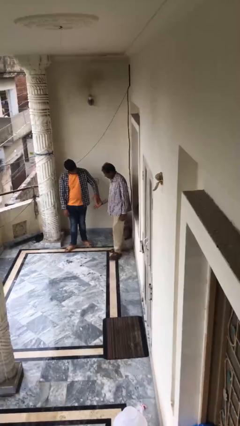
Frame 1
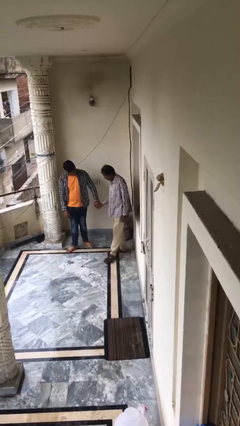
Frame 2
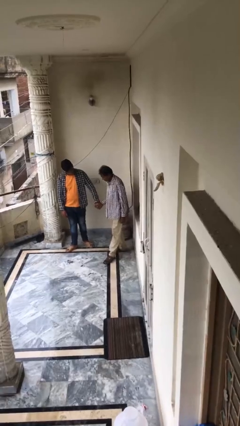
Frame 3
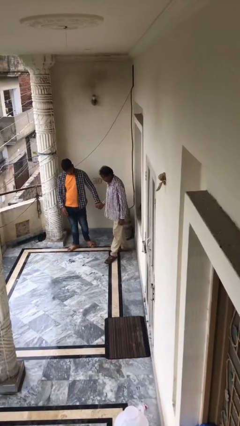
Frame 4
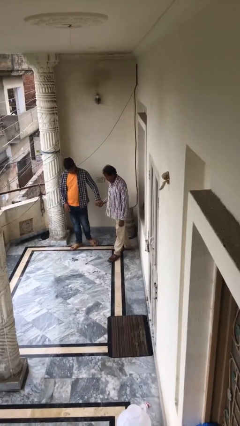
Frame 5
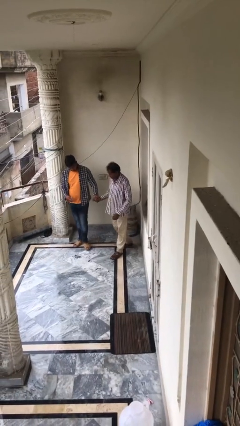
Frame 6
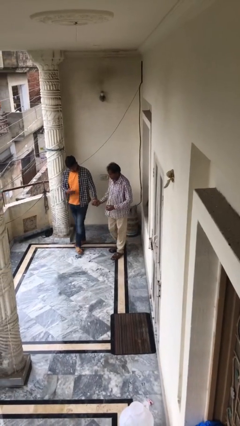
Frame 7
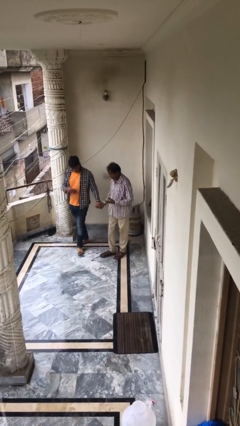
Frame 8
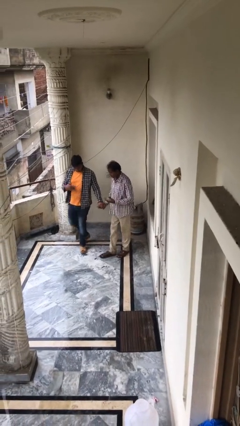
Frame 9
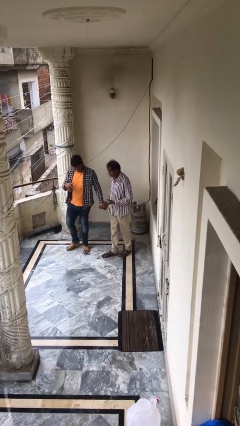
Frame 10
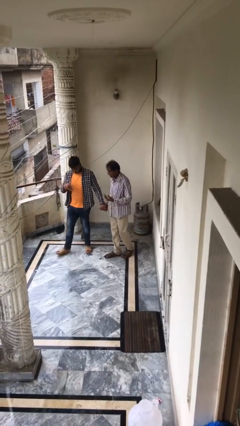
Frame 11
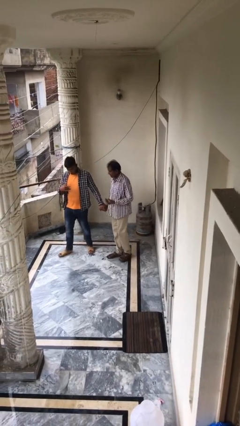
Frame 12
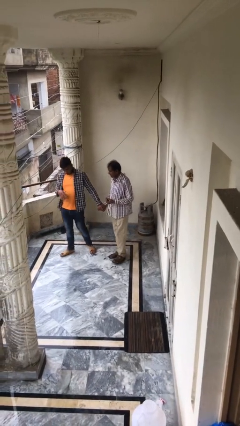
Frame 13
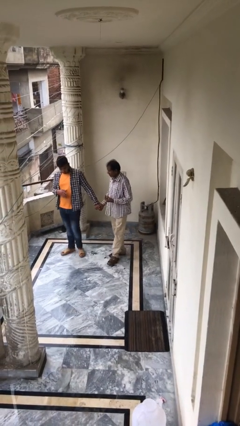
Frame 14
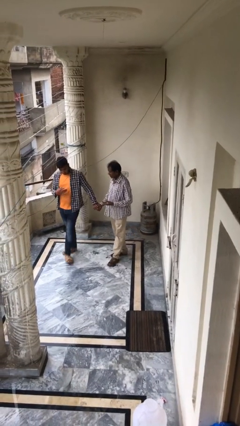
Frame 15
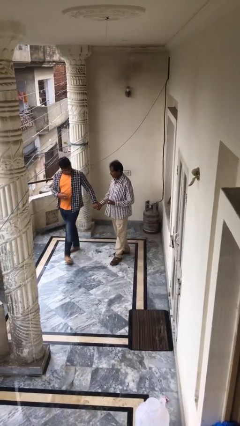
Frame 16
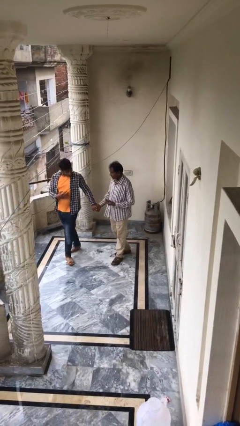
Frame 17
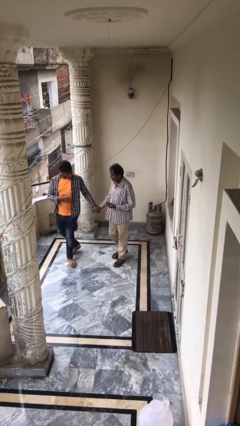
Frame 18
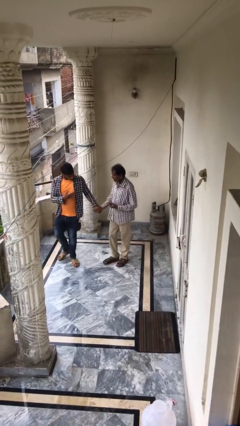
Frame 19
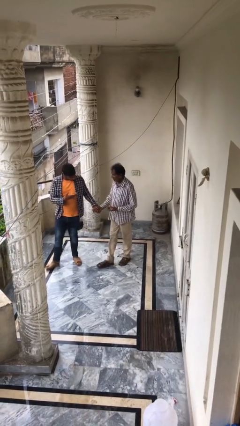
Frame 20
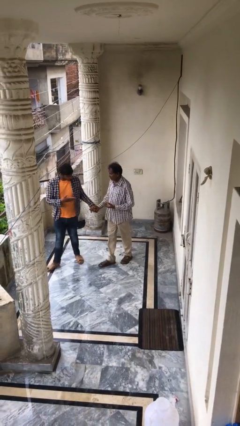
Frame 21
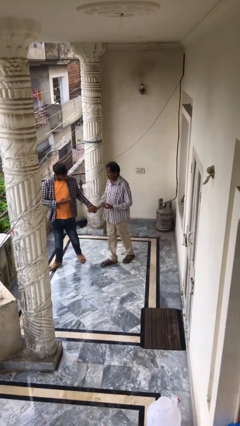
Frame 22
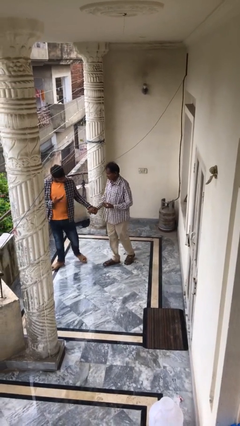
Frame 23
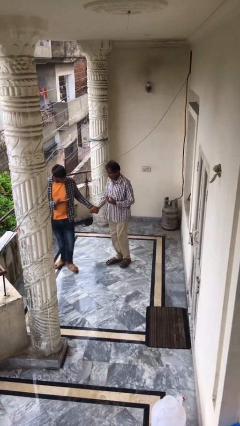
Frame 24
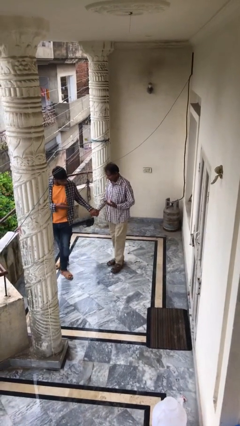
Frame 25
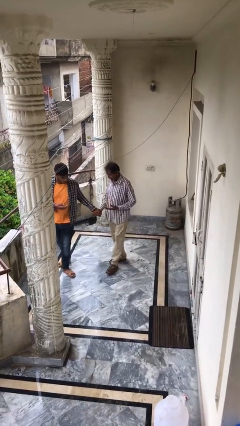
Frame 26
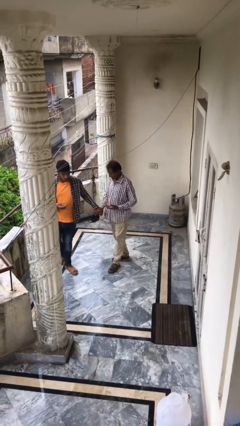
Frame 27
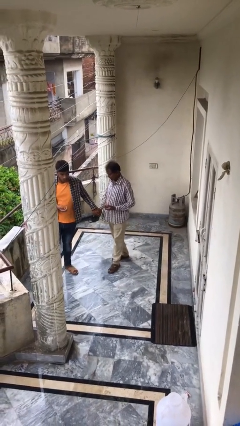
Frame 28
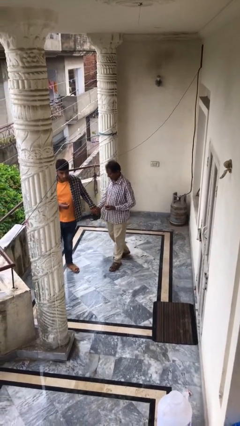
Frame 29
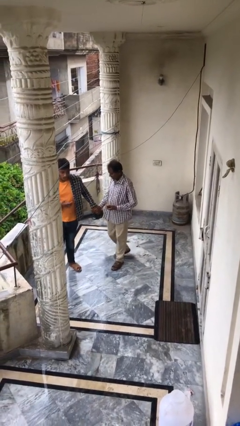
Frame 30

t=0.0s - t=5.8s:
person holds hand

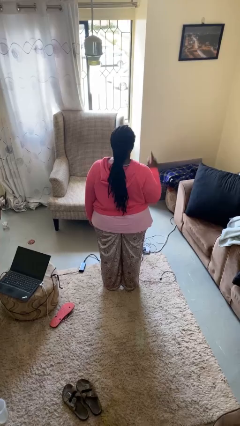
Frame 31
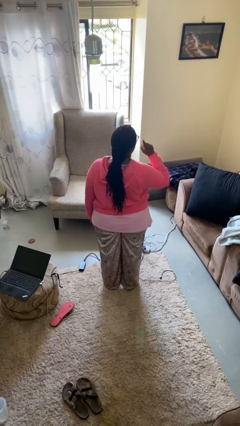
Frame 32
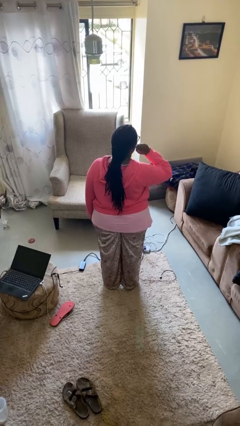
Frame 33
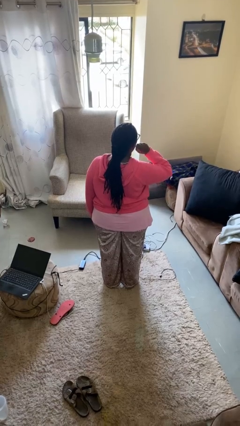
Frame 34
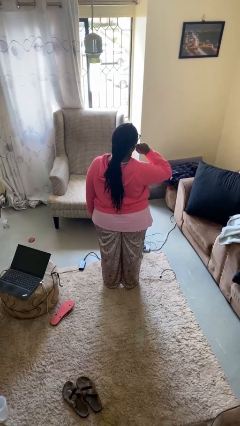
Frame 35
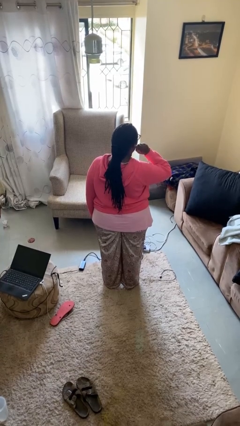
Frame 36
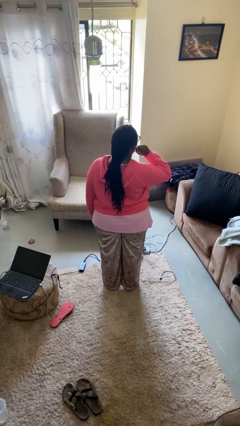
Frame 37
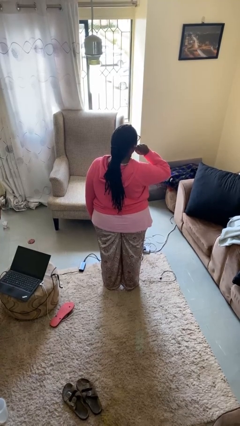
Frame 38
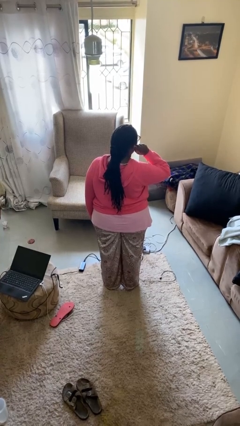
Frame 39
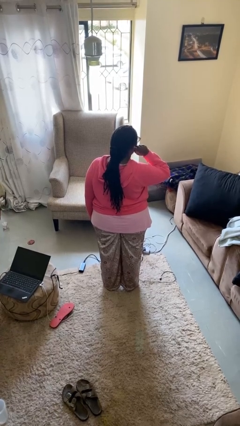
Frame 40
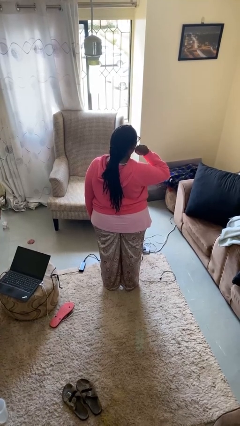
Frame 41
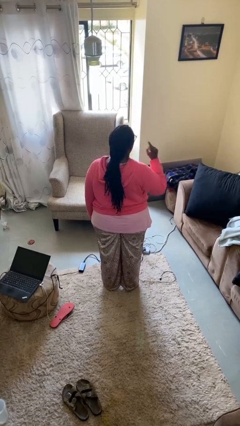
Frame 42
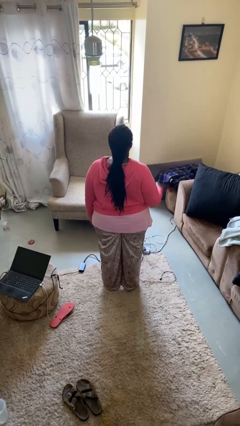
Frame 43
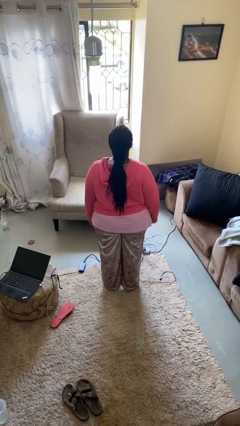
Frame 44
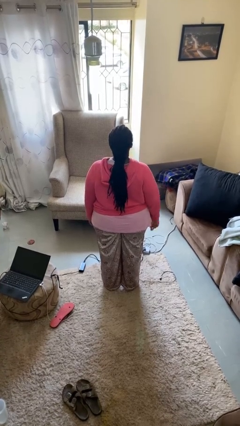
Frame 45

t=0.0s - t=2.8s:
person gestures listen closely

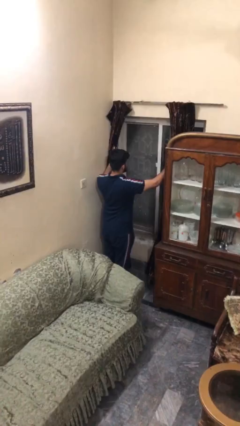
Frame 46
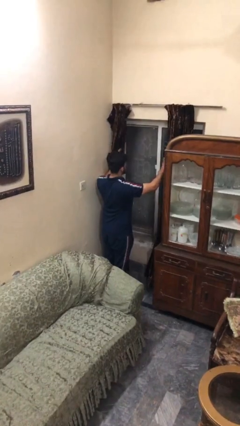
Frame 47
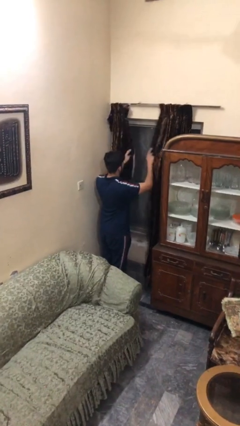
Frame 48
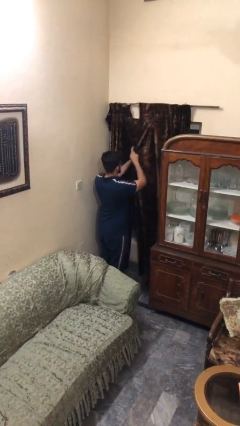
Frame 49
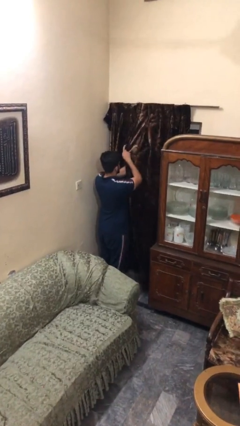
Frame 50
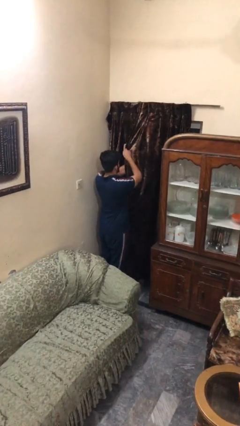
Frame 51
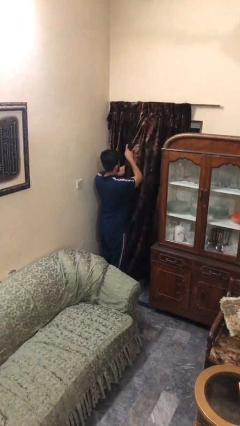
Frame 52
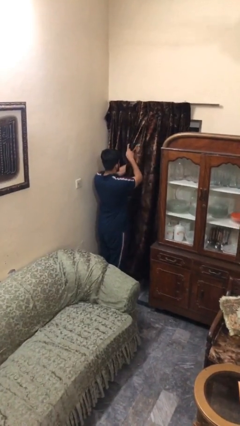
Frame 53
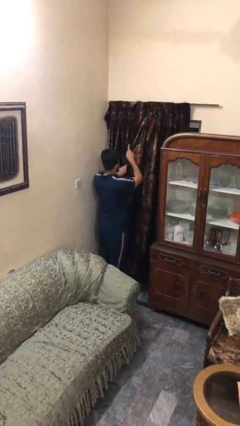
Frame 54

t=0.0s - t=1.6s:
person closes curtains

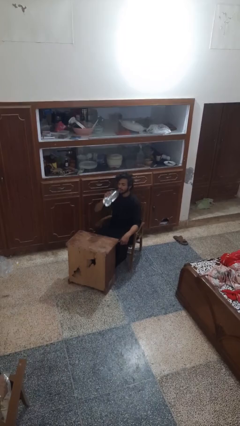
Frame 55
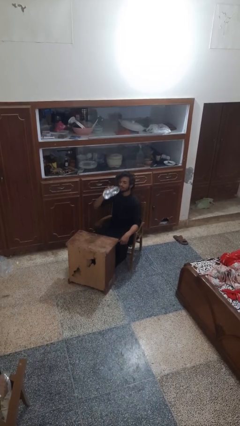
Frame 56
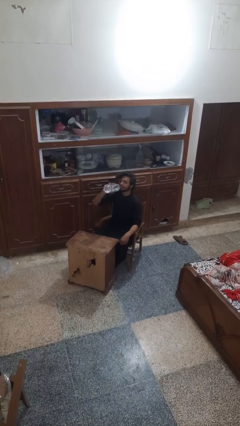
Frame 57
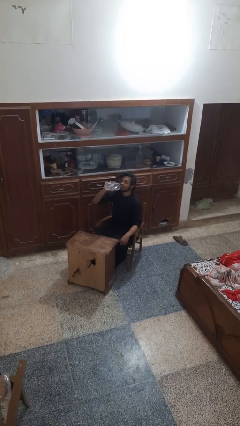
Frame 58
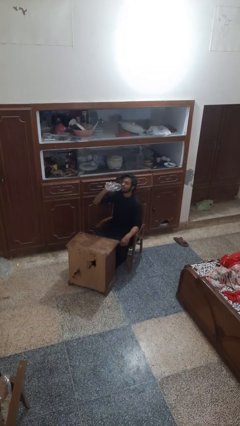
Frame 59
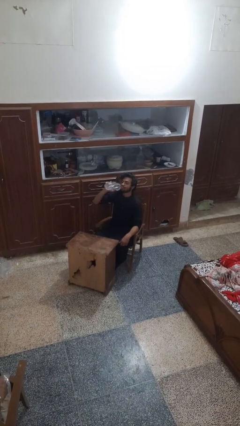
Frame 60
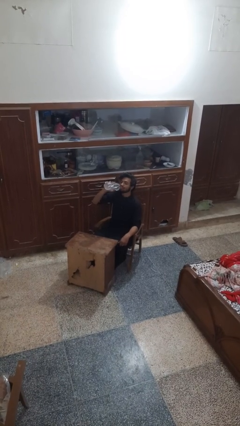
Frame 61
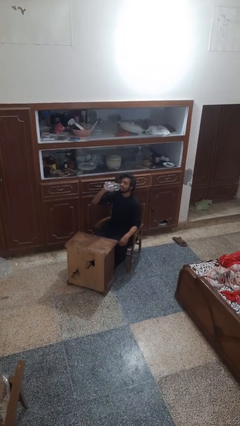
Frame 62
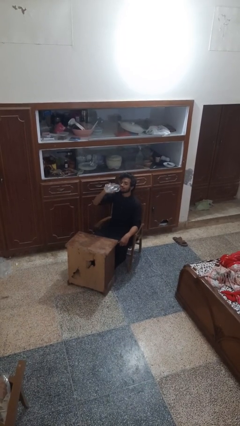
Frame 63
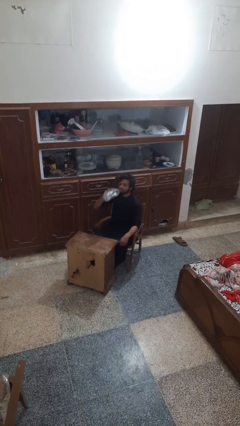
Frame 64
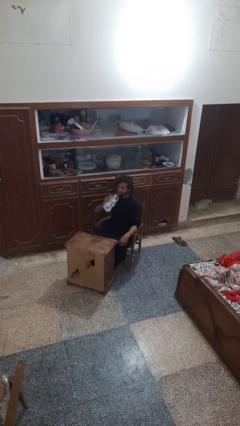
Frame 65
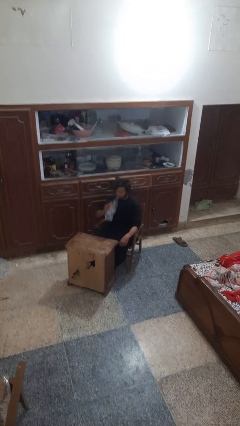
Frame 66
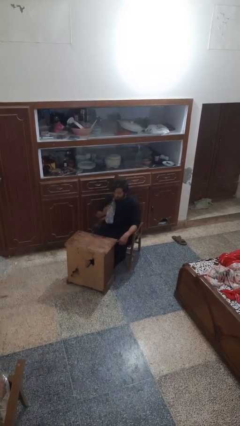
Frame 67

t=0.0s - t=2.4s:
person drinks from bottle

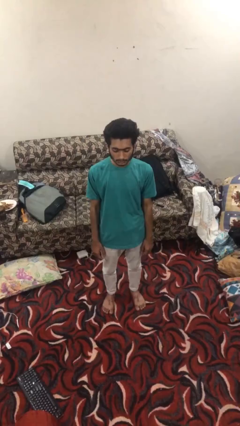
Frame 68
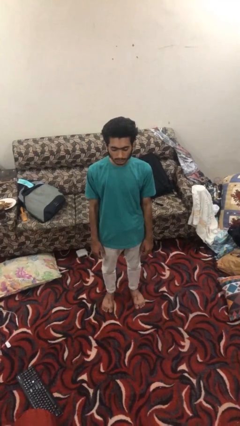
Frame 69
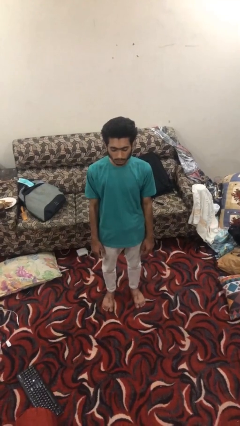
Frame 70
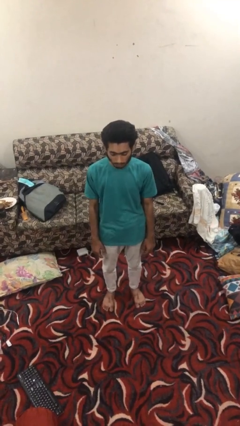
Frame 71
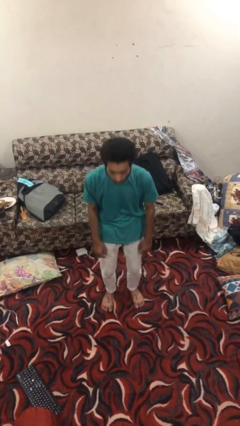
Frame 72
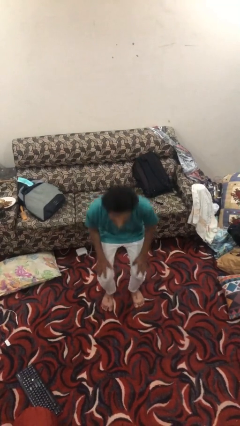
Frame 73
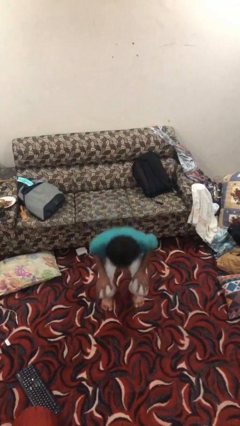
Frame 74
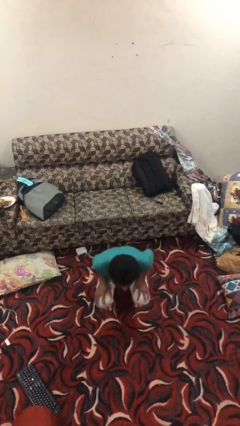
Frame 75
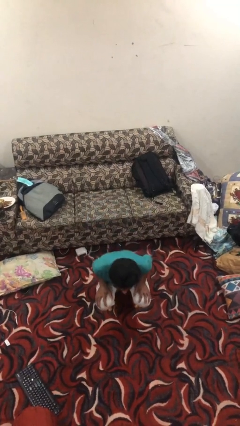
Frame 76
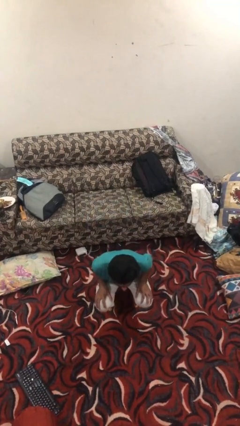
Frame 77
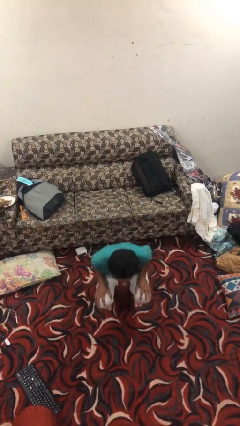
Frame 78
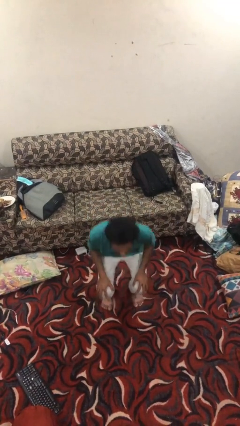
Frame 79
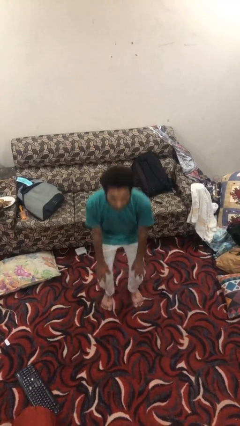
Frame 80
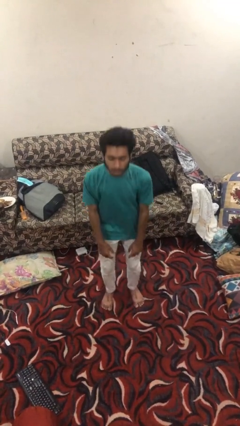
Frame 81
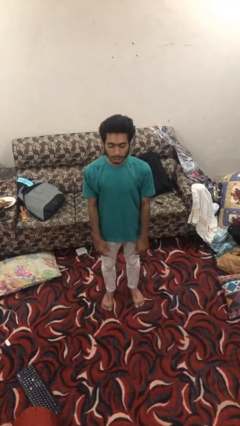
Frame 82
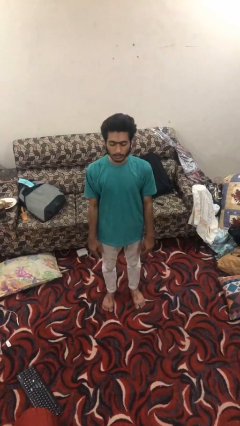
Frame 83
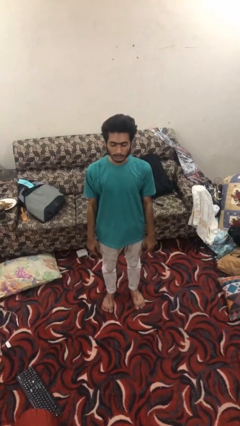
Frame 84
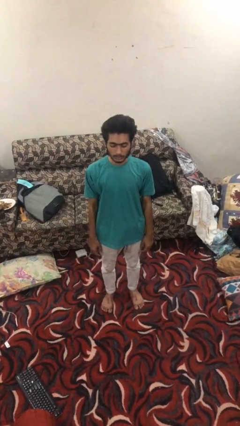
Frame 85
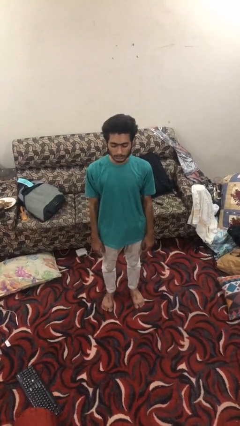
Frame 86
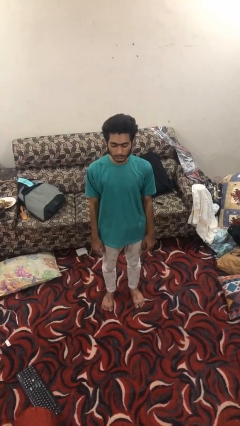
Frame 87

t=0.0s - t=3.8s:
person exercises with situp

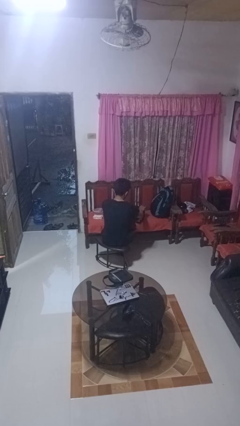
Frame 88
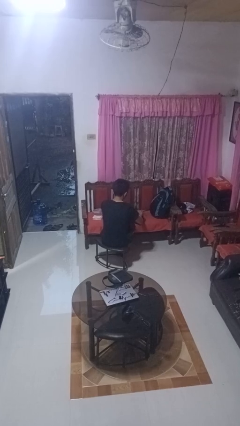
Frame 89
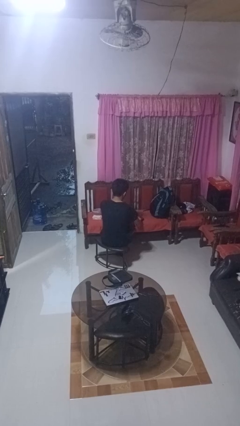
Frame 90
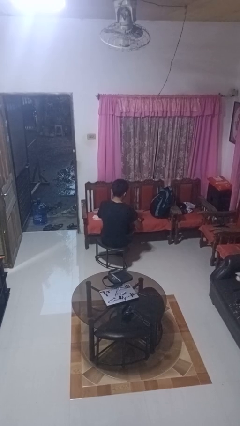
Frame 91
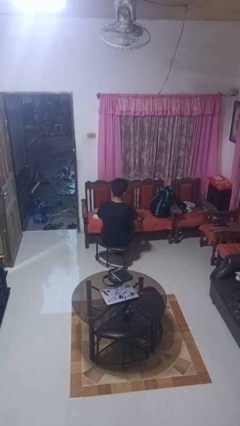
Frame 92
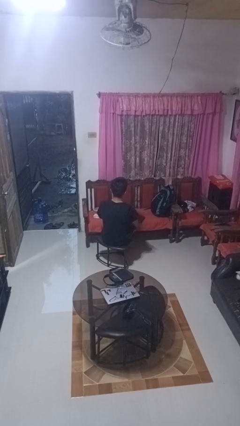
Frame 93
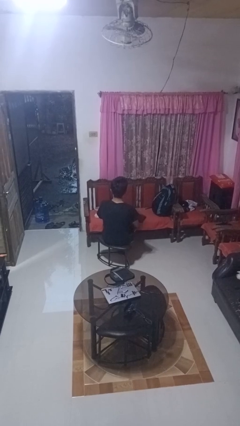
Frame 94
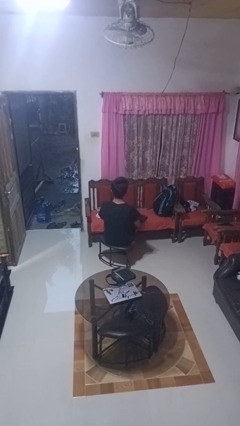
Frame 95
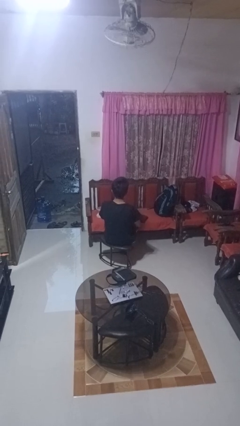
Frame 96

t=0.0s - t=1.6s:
person closes laptop
